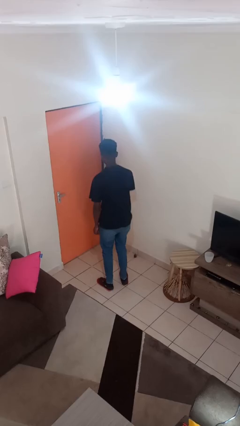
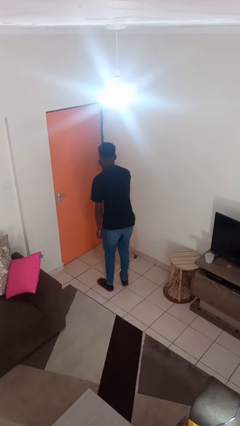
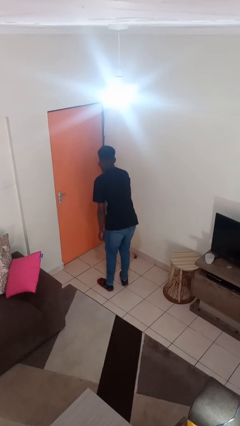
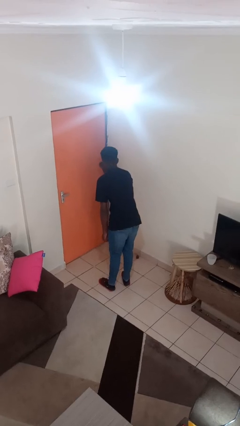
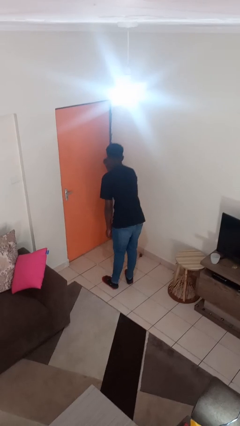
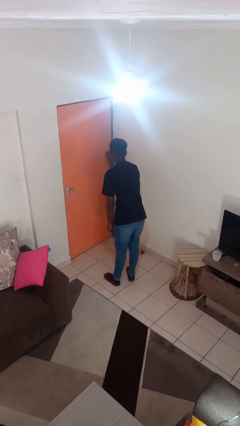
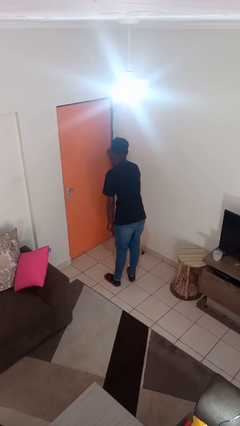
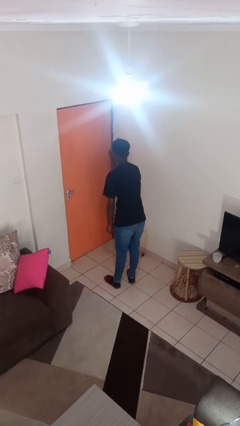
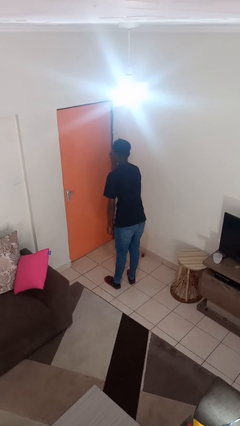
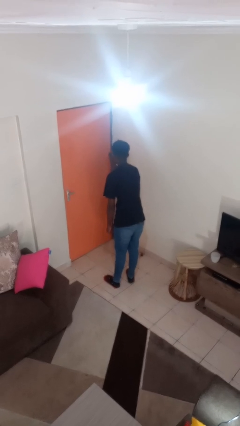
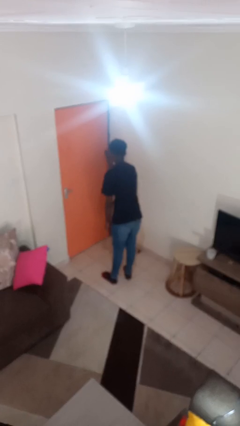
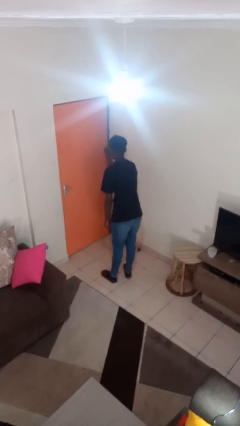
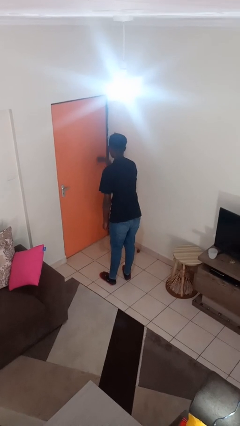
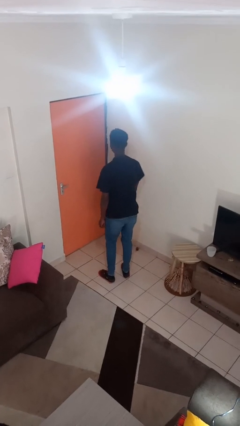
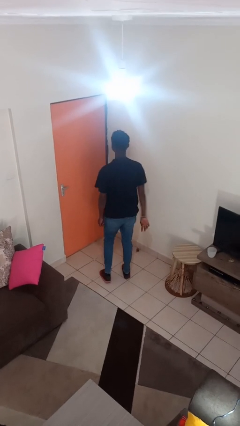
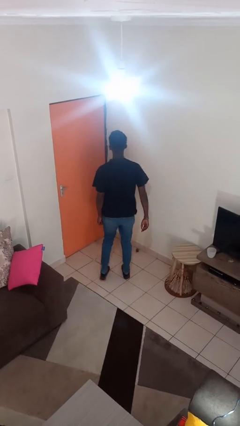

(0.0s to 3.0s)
person gestures watch closely

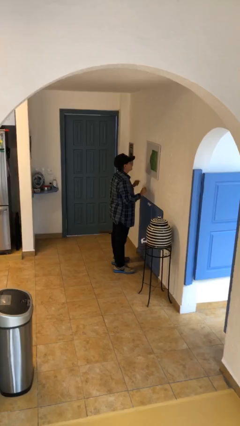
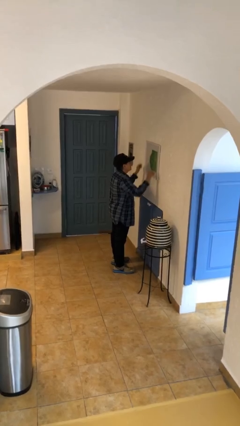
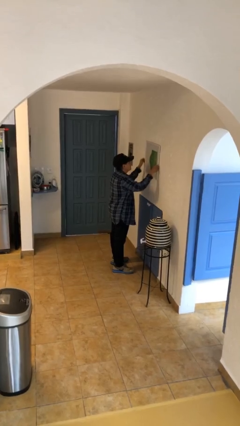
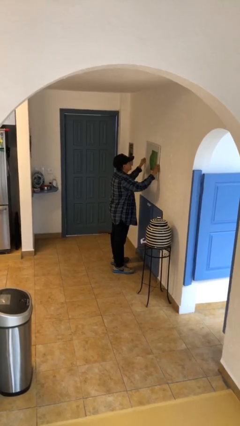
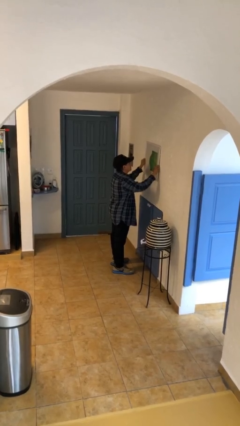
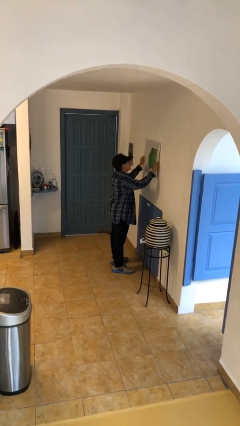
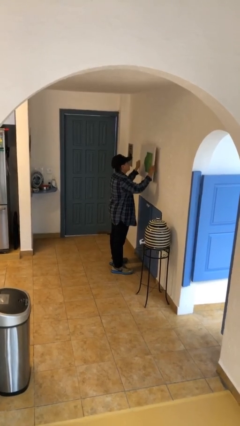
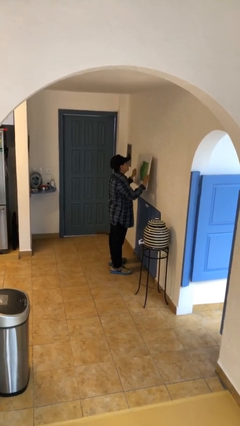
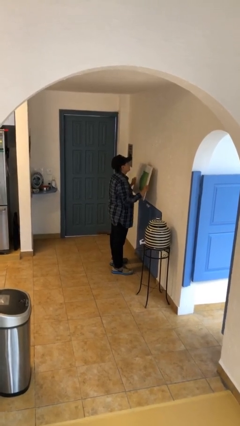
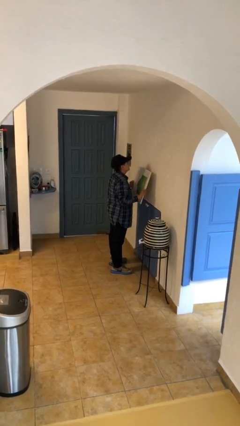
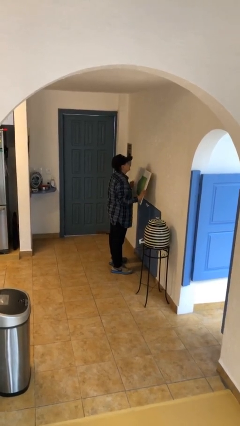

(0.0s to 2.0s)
person takes down picture frame

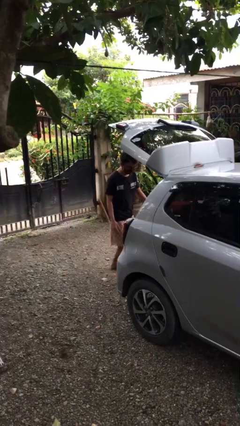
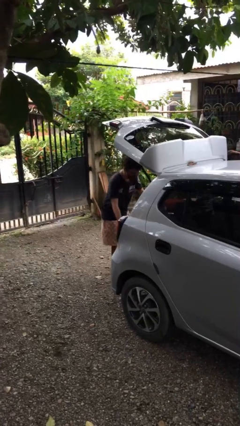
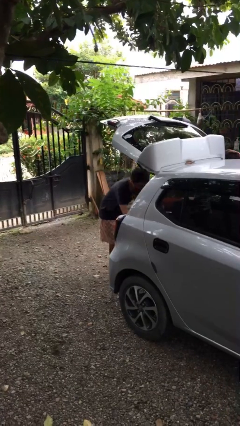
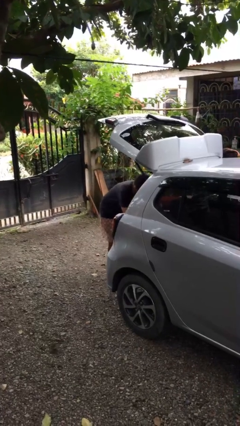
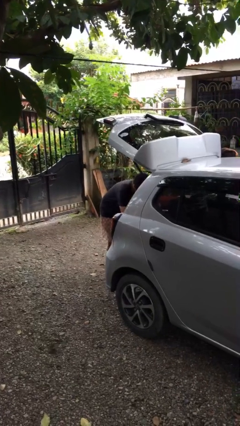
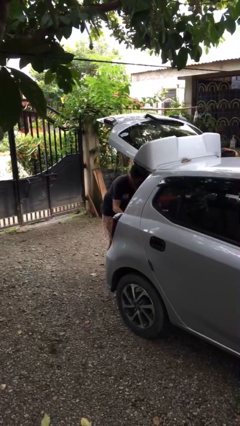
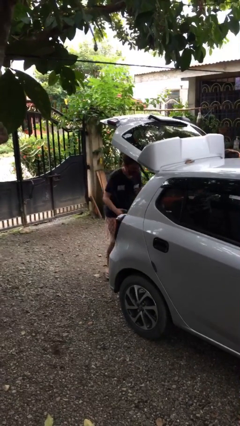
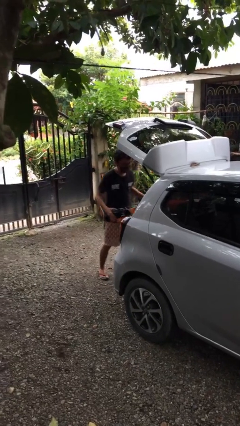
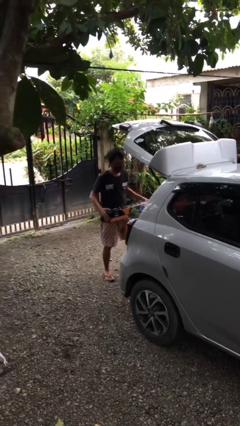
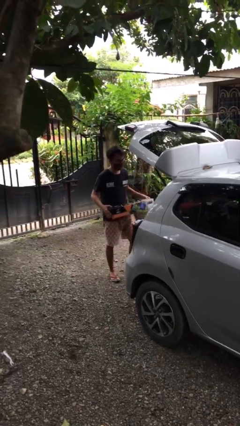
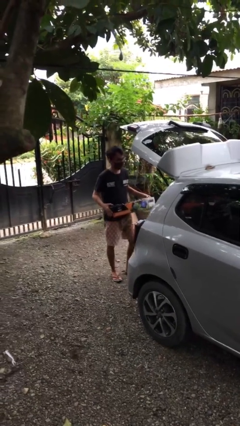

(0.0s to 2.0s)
person unloads car

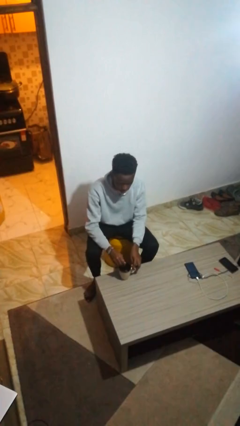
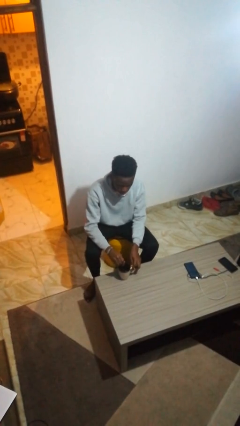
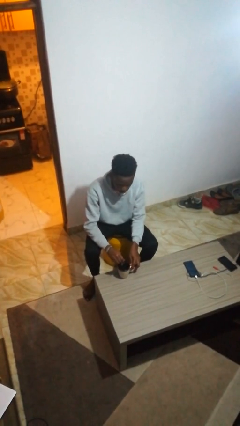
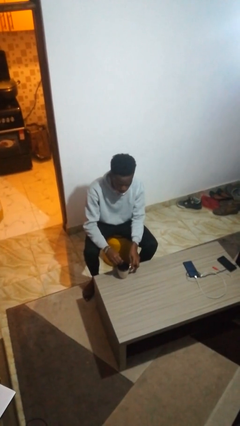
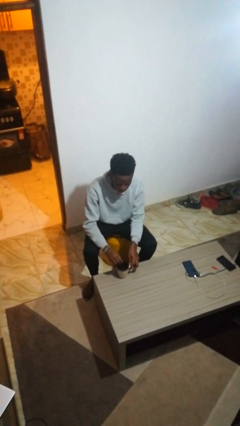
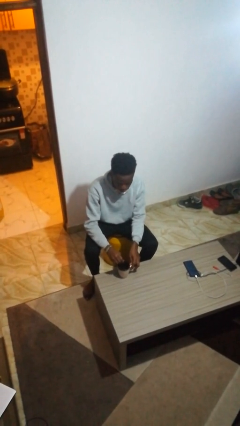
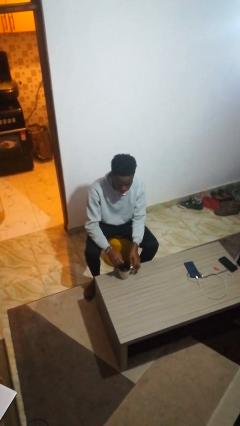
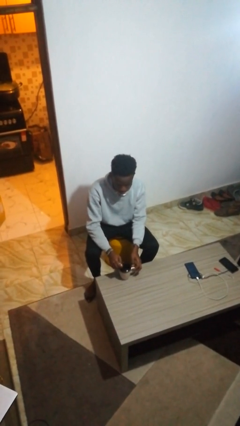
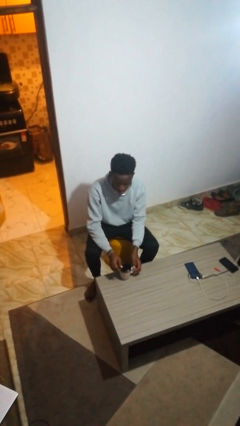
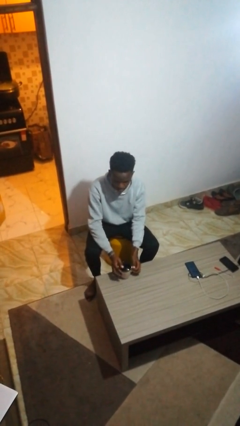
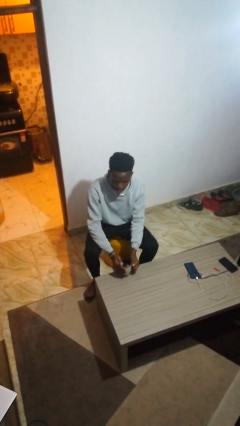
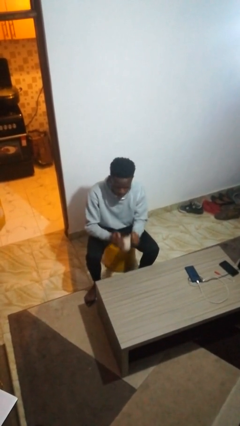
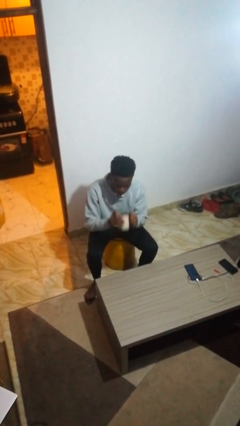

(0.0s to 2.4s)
person stirs mug

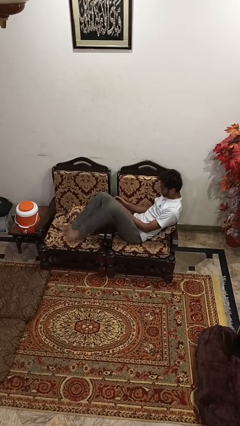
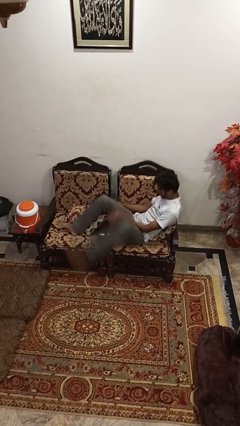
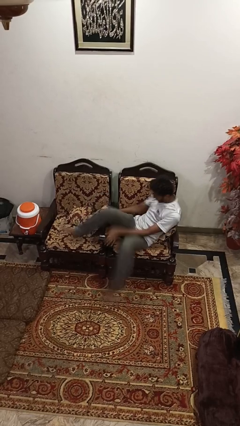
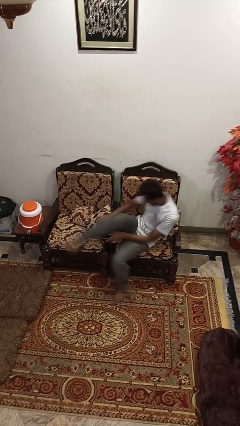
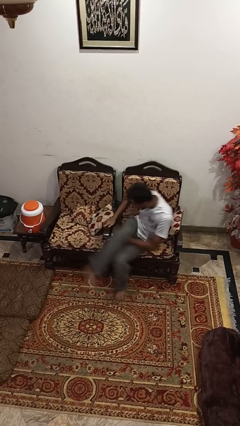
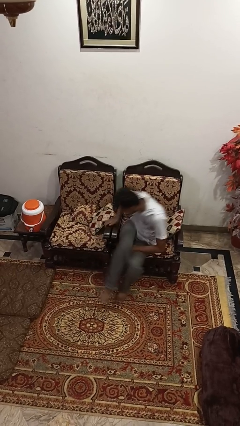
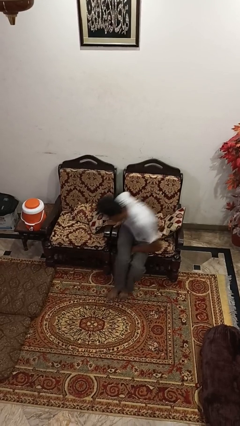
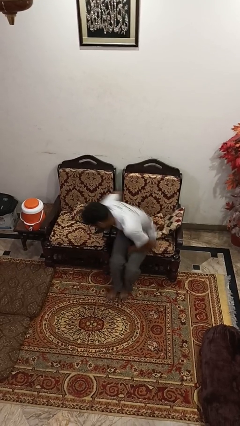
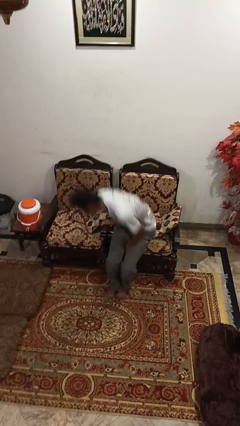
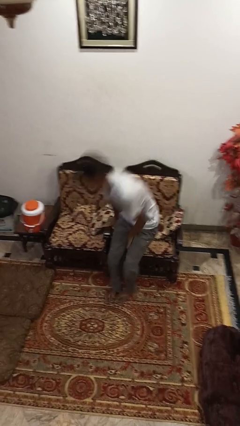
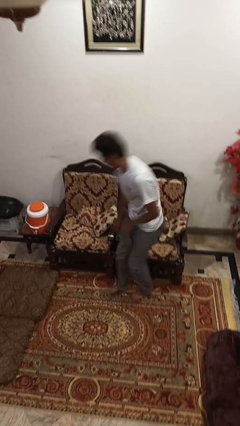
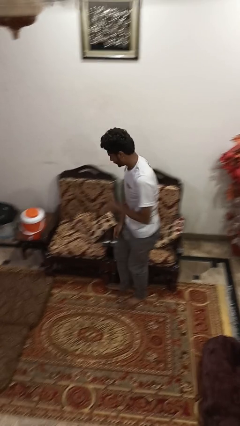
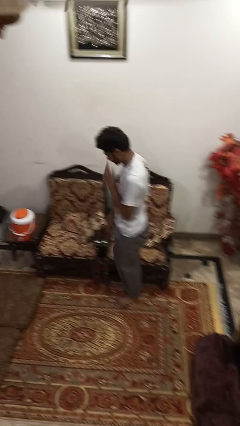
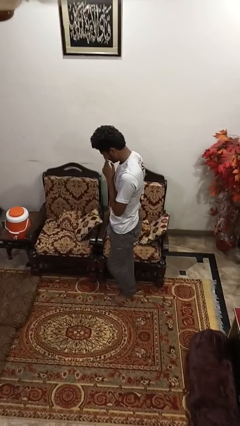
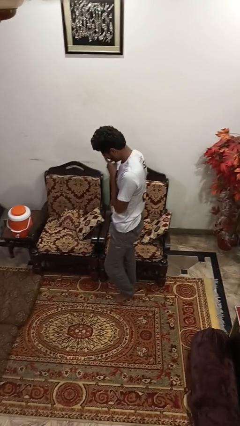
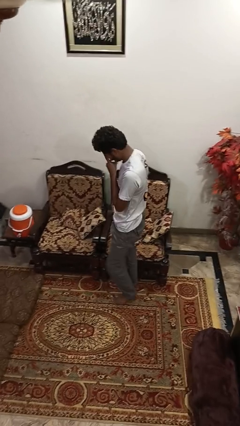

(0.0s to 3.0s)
person stands up

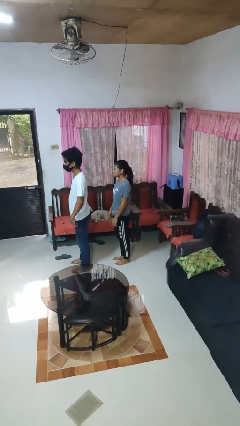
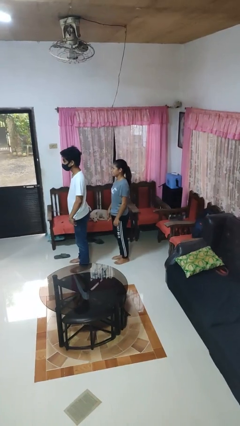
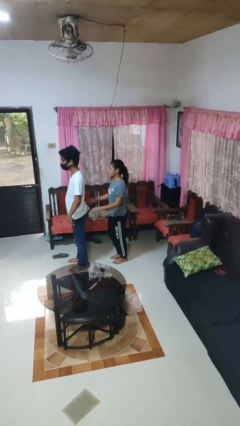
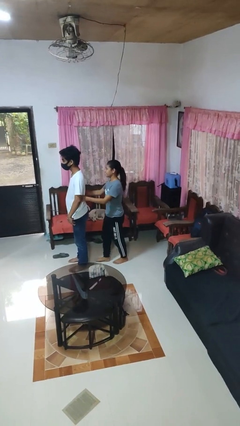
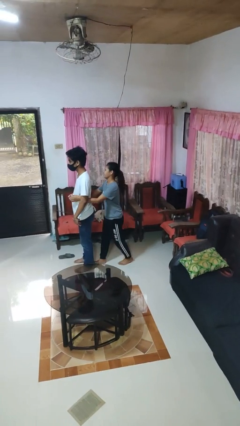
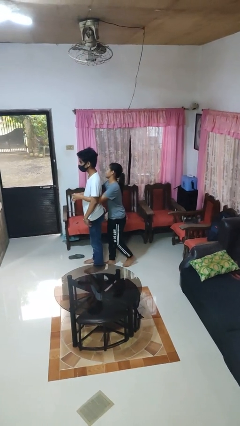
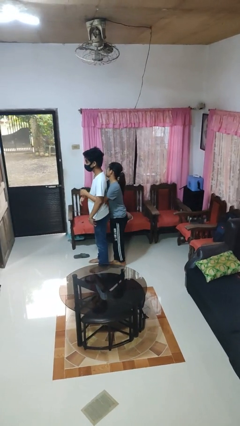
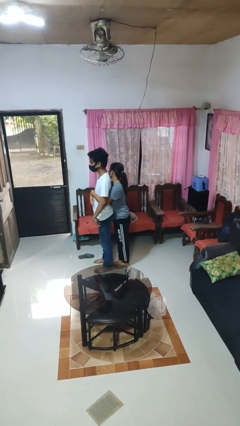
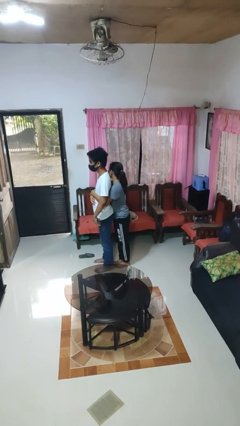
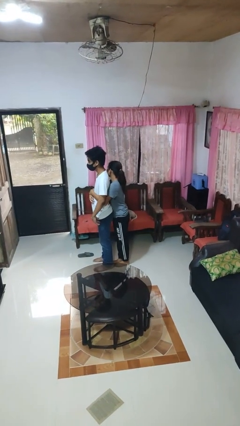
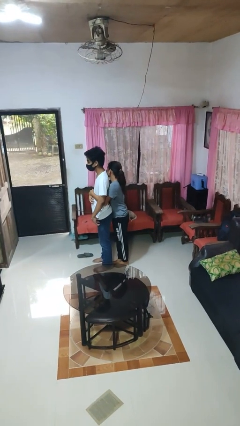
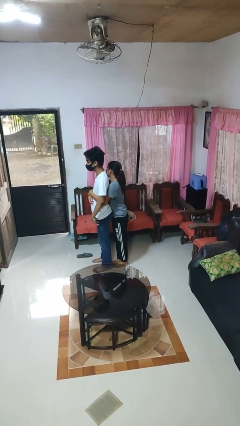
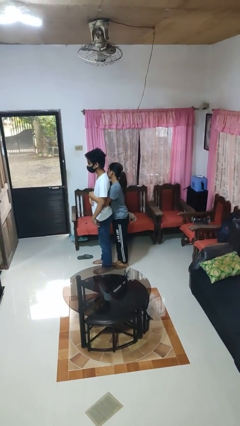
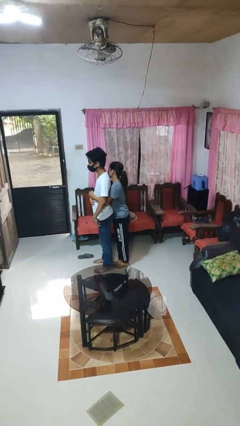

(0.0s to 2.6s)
person hugs person from behind

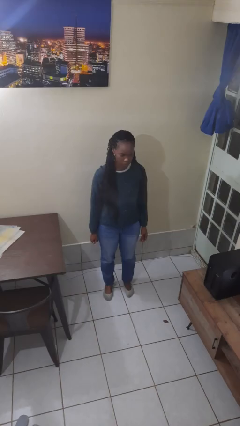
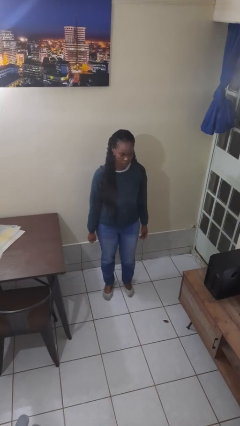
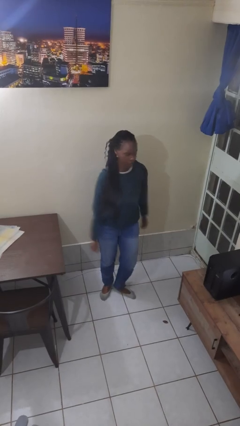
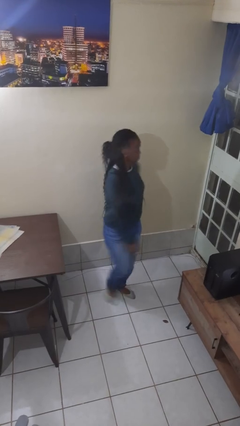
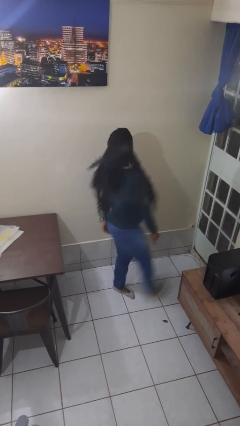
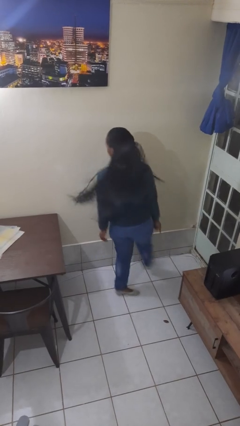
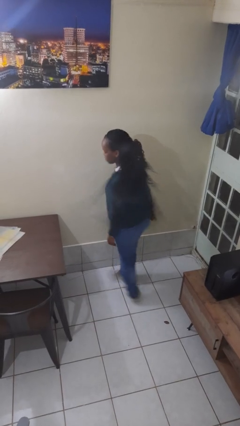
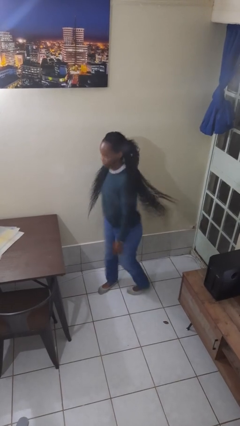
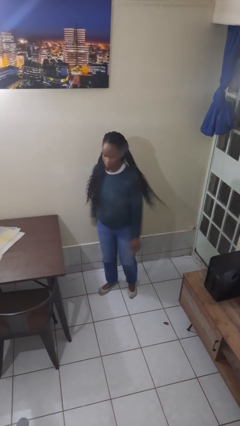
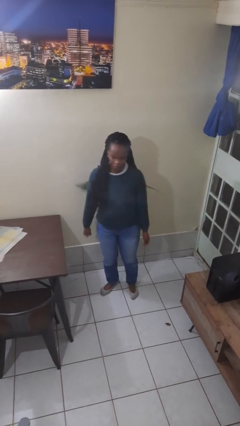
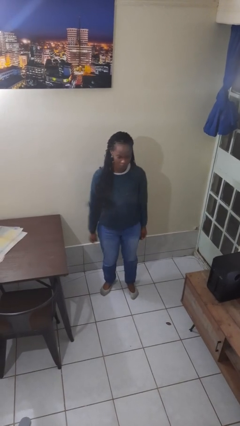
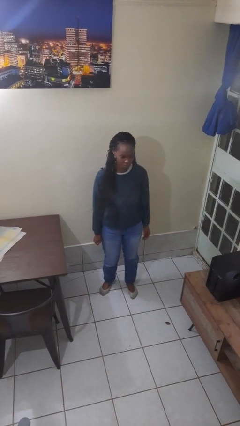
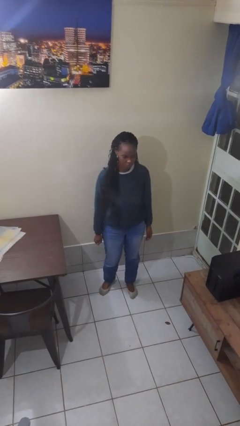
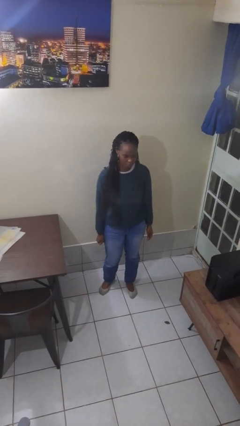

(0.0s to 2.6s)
person twirls
